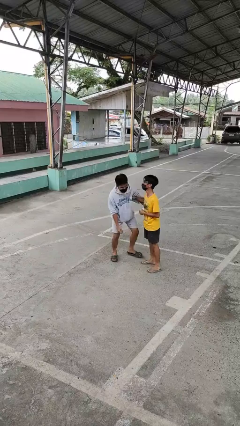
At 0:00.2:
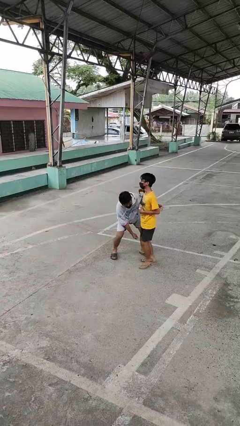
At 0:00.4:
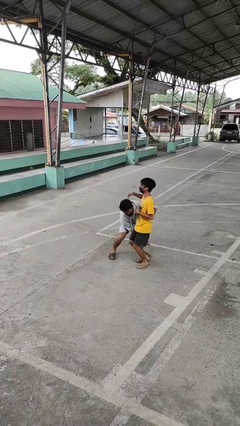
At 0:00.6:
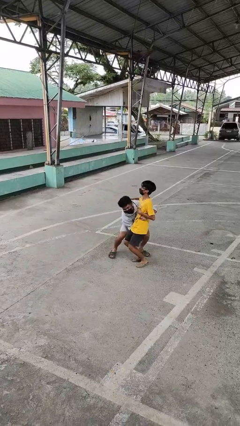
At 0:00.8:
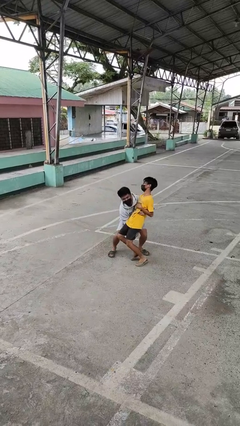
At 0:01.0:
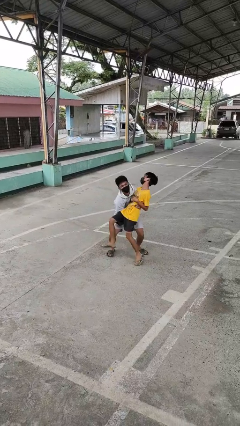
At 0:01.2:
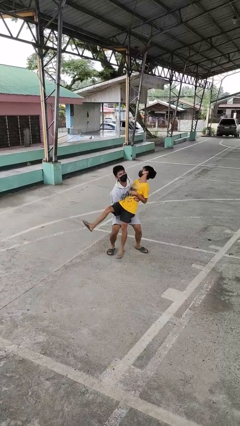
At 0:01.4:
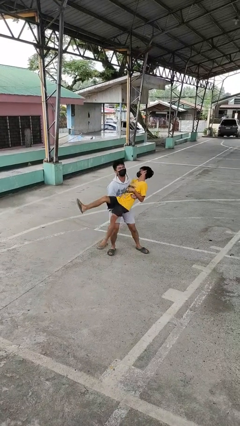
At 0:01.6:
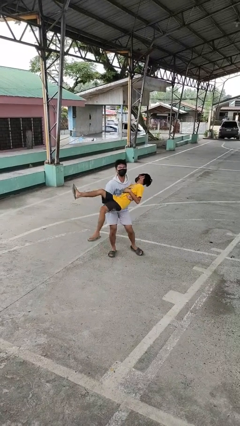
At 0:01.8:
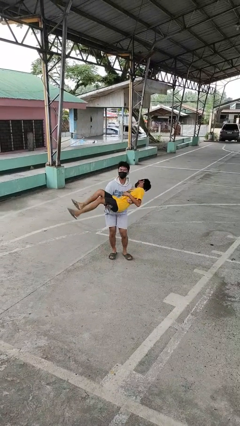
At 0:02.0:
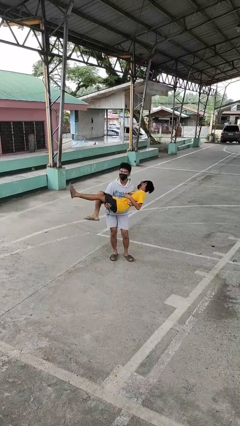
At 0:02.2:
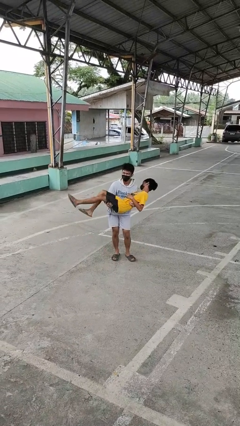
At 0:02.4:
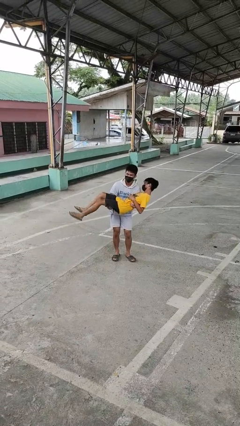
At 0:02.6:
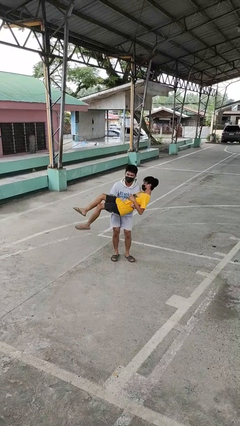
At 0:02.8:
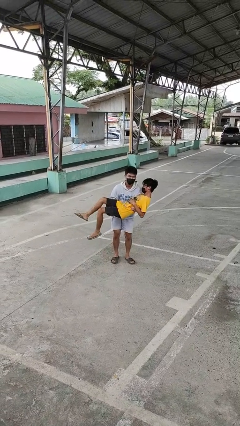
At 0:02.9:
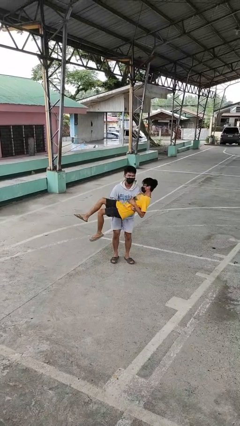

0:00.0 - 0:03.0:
person picks up person

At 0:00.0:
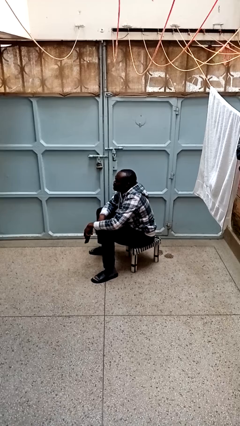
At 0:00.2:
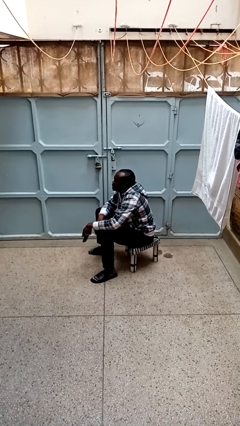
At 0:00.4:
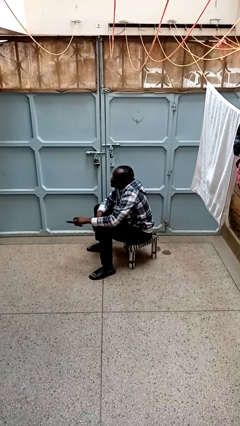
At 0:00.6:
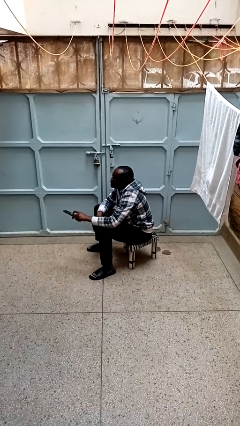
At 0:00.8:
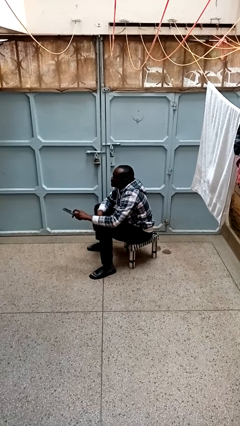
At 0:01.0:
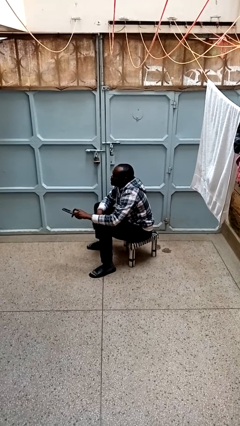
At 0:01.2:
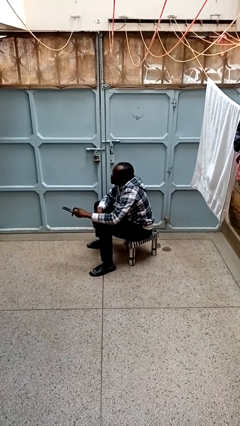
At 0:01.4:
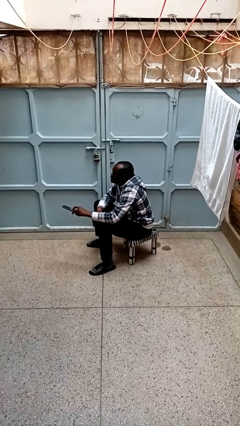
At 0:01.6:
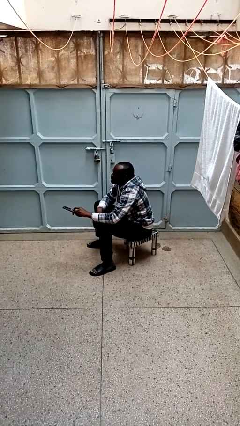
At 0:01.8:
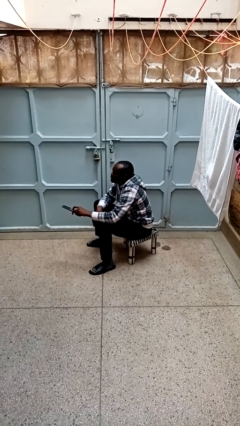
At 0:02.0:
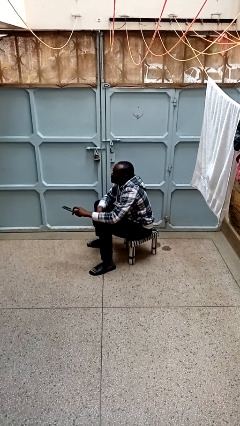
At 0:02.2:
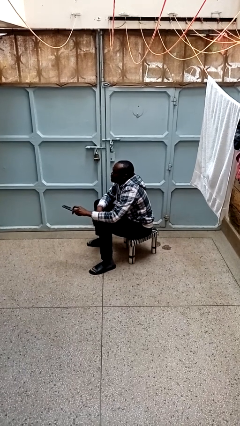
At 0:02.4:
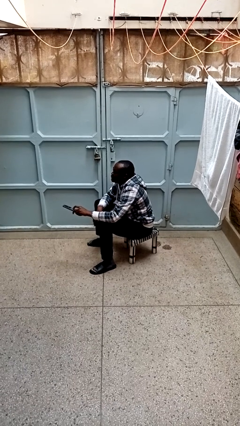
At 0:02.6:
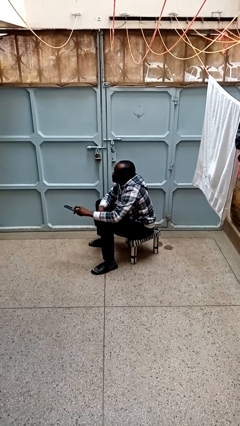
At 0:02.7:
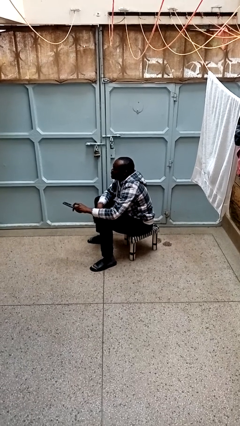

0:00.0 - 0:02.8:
person uses television remote

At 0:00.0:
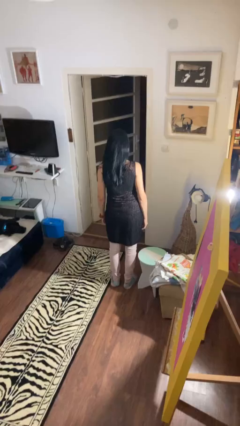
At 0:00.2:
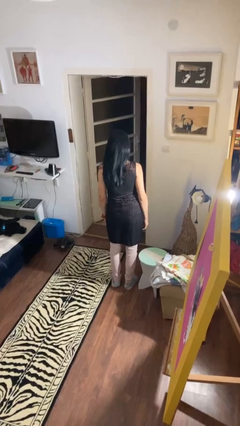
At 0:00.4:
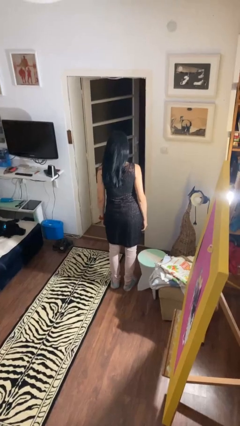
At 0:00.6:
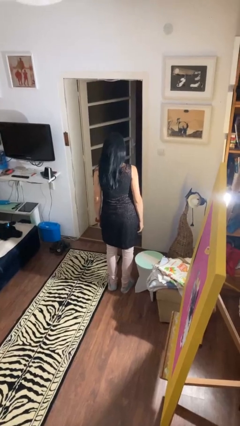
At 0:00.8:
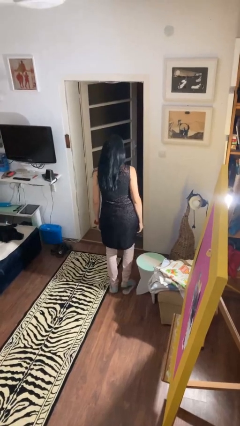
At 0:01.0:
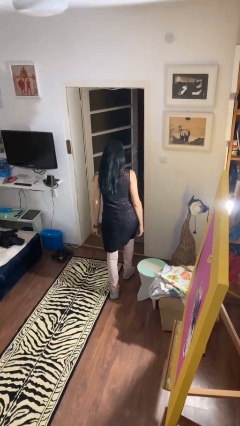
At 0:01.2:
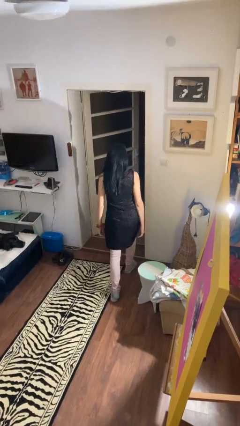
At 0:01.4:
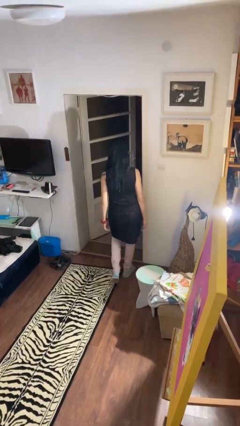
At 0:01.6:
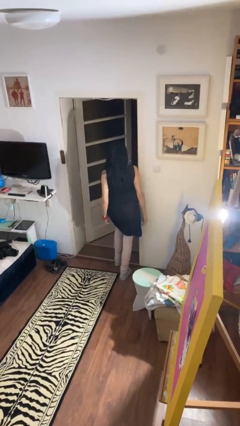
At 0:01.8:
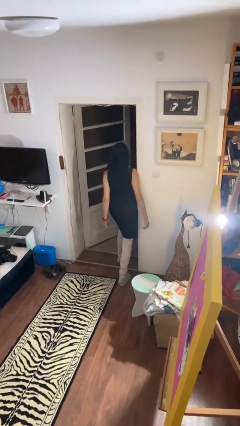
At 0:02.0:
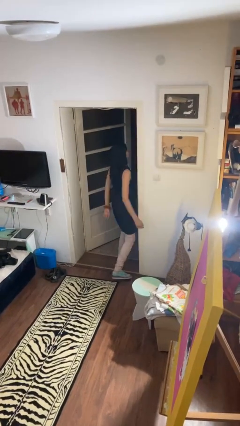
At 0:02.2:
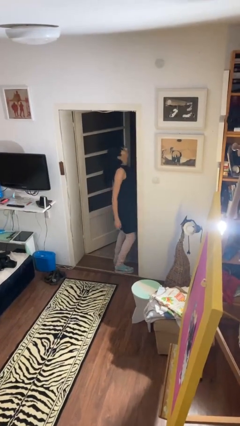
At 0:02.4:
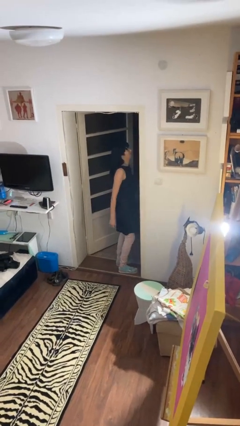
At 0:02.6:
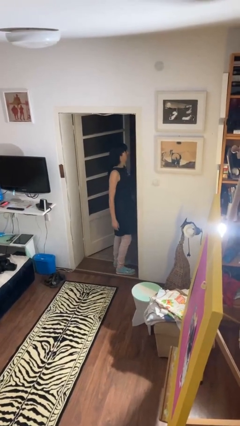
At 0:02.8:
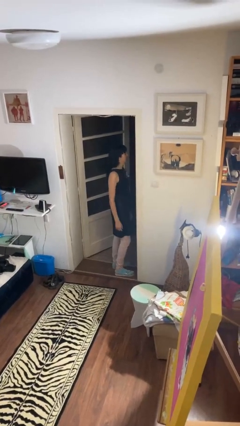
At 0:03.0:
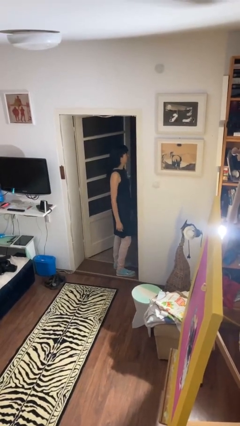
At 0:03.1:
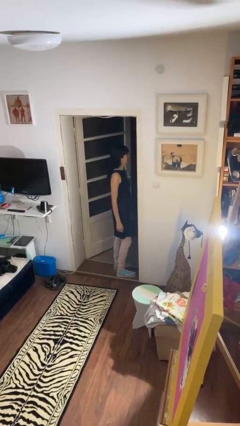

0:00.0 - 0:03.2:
person bumps into wall

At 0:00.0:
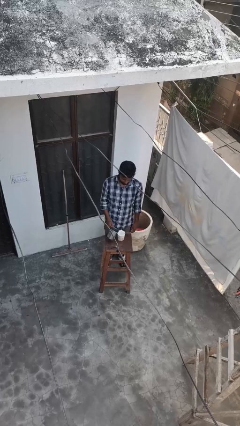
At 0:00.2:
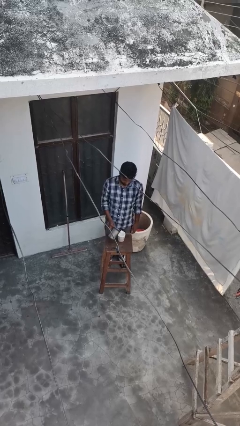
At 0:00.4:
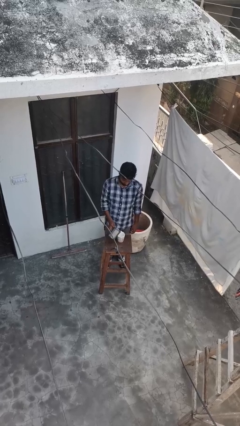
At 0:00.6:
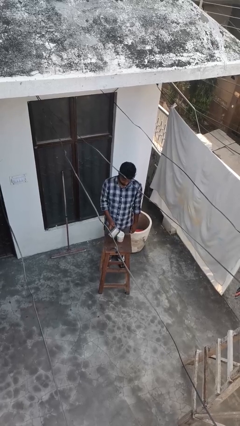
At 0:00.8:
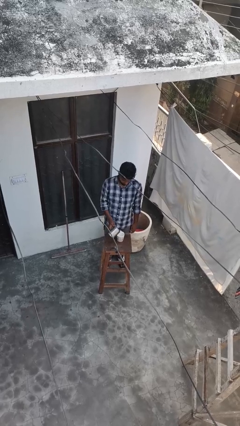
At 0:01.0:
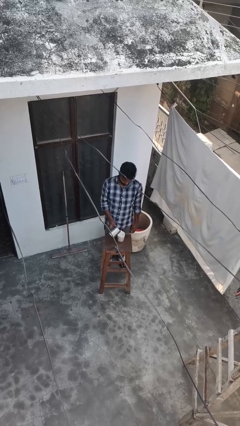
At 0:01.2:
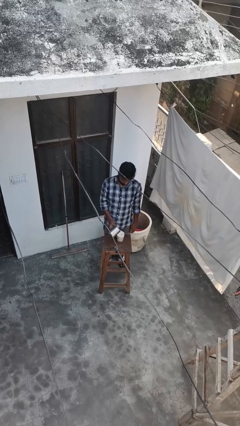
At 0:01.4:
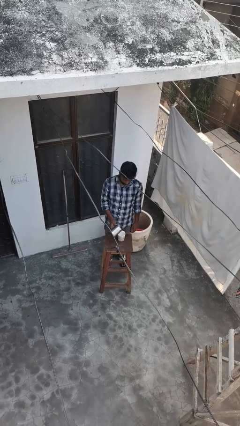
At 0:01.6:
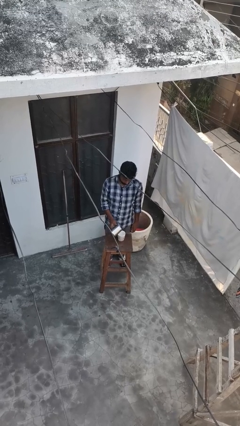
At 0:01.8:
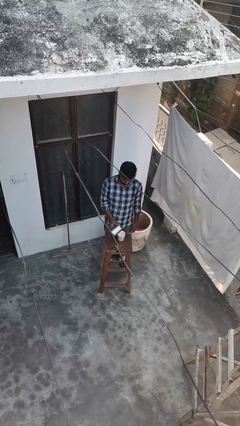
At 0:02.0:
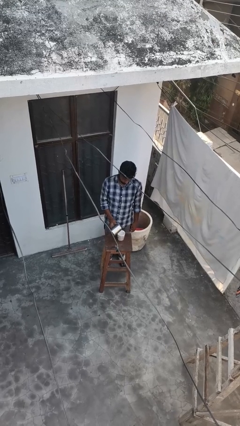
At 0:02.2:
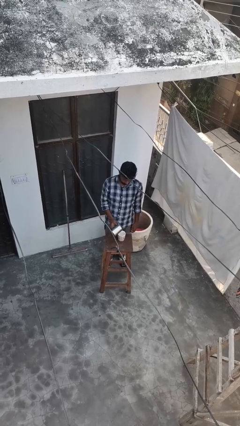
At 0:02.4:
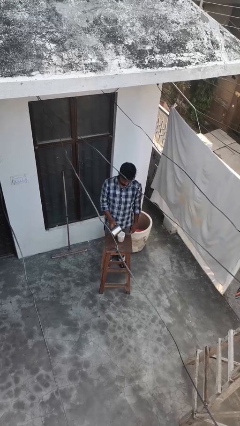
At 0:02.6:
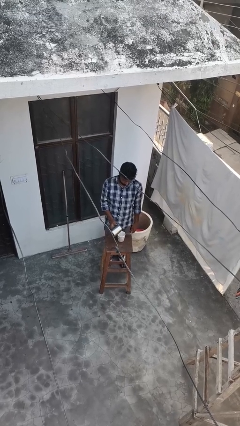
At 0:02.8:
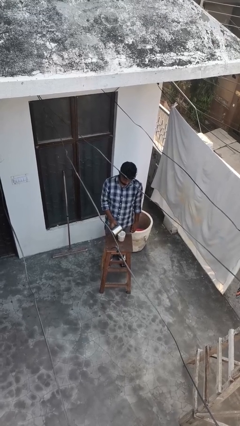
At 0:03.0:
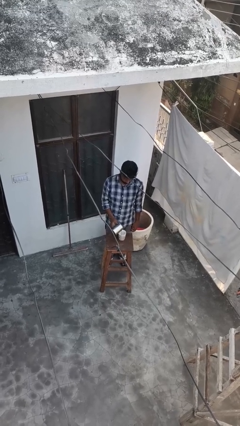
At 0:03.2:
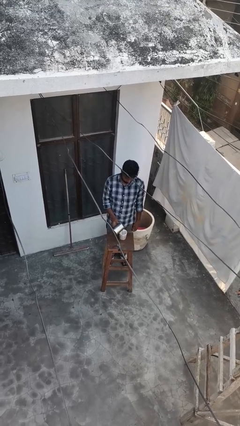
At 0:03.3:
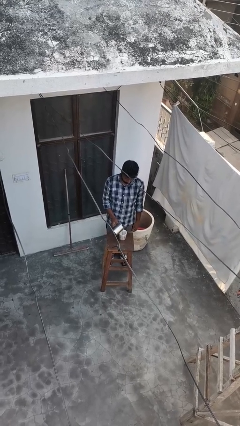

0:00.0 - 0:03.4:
person pours coffee into mug

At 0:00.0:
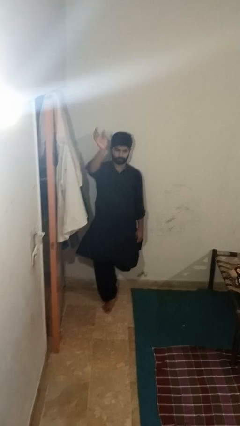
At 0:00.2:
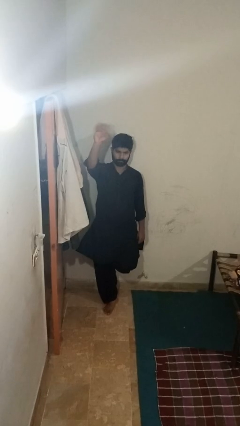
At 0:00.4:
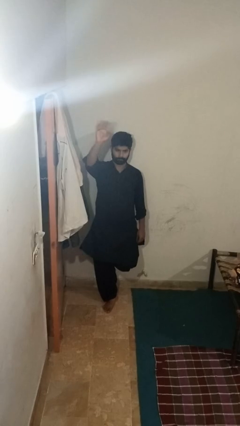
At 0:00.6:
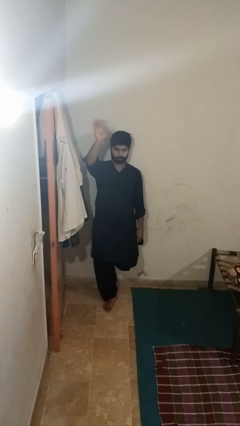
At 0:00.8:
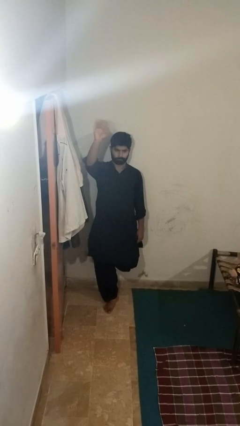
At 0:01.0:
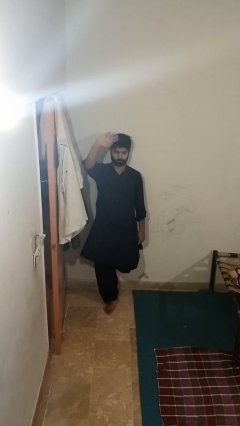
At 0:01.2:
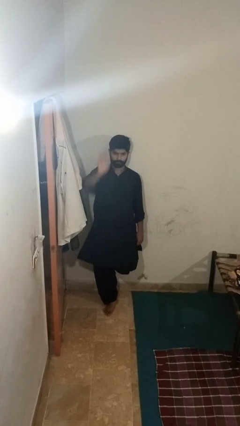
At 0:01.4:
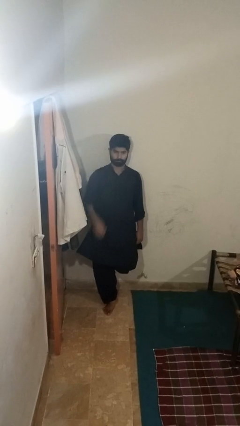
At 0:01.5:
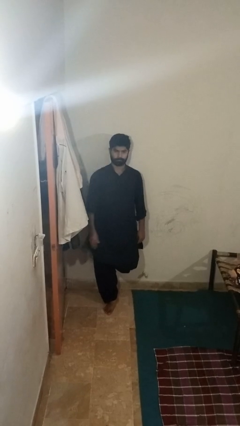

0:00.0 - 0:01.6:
person waves at person

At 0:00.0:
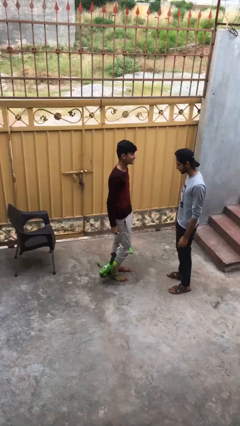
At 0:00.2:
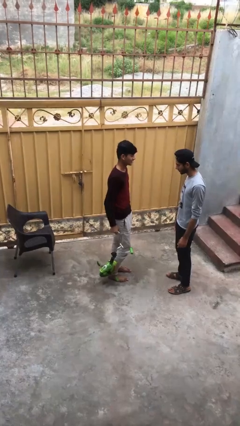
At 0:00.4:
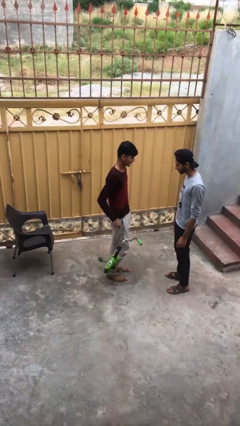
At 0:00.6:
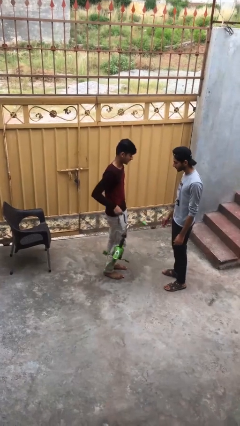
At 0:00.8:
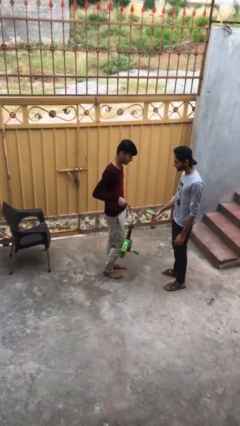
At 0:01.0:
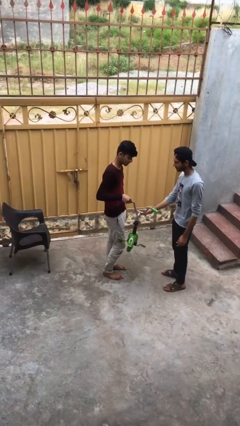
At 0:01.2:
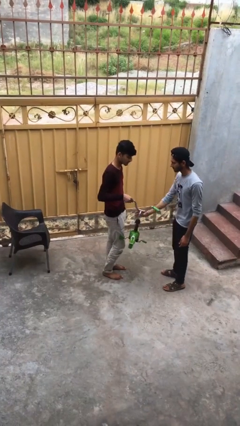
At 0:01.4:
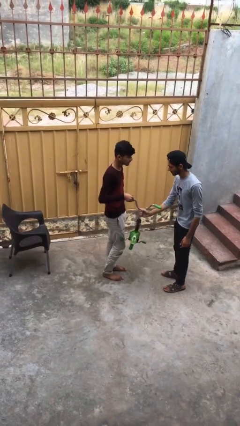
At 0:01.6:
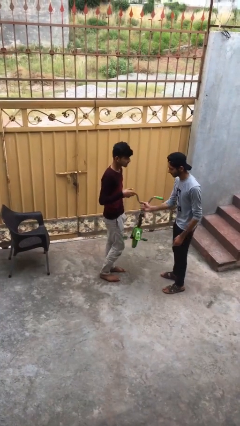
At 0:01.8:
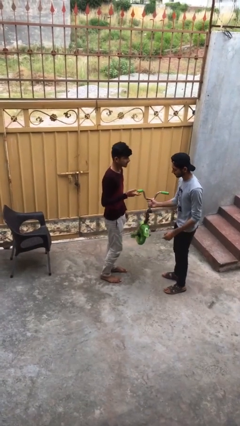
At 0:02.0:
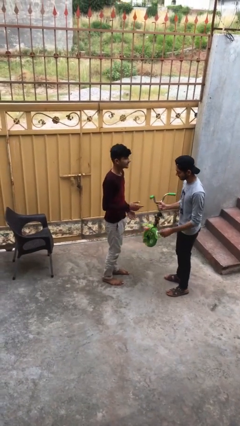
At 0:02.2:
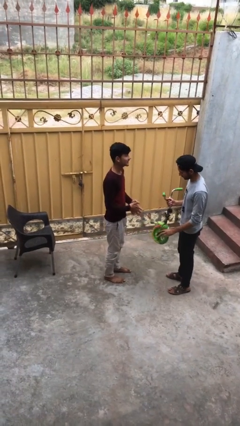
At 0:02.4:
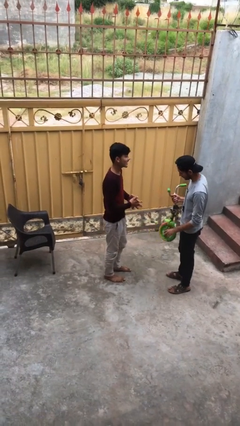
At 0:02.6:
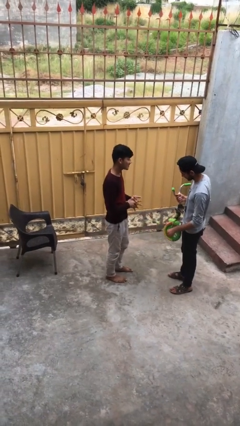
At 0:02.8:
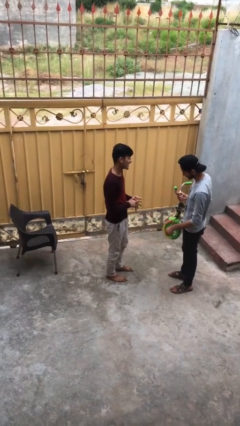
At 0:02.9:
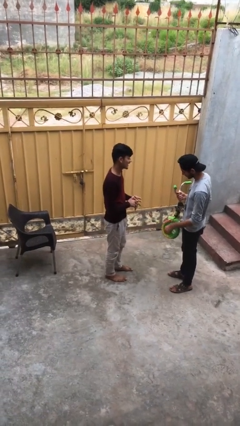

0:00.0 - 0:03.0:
person transfers object to person

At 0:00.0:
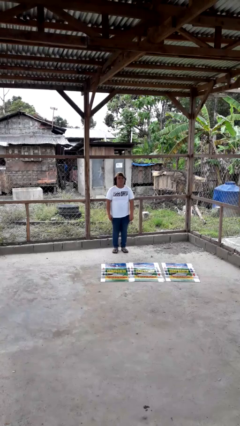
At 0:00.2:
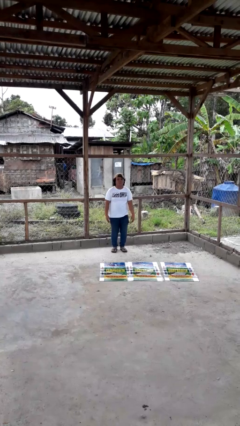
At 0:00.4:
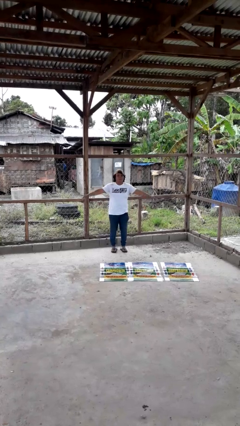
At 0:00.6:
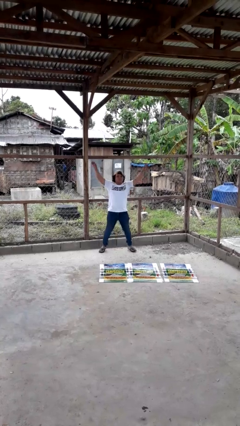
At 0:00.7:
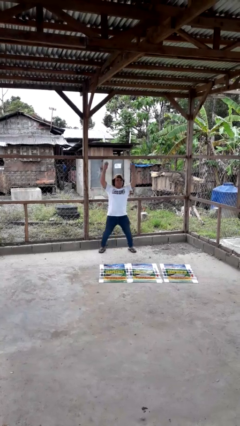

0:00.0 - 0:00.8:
person exercises with jumping jacks
